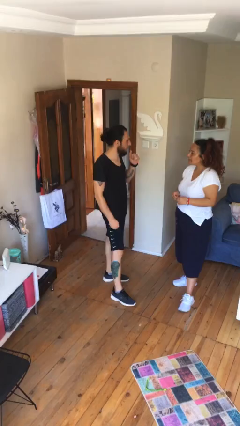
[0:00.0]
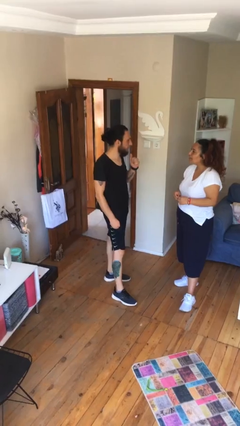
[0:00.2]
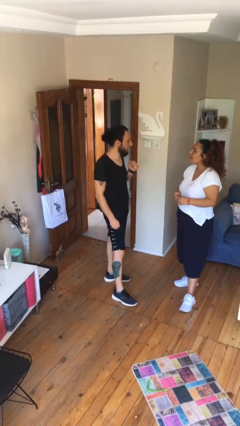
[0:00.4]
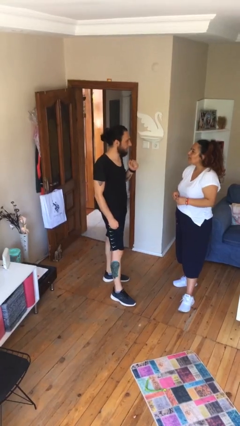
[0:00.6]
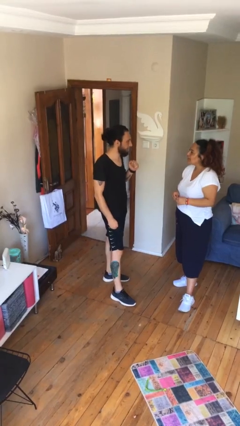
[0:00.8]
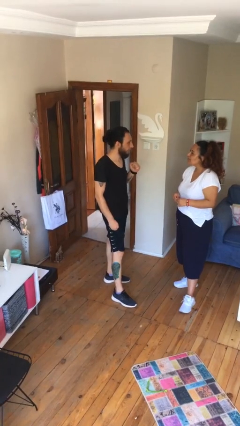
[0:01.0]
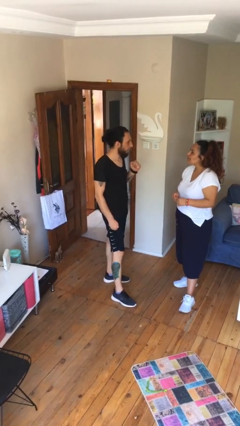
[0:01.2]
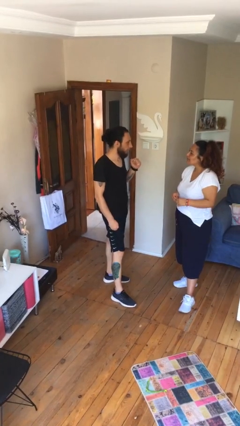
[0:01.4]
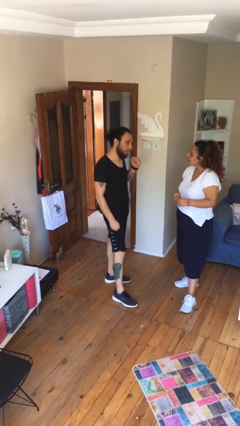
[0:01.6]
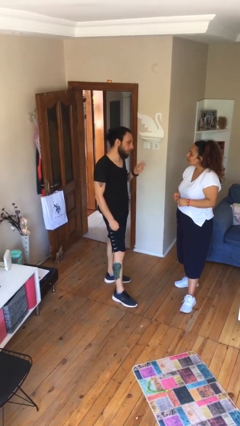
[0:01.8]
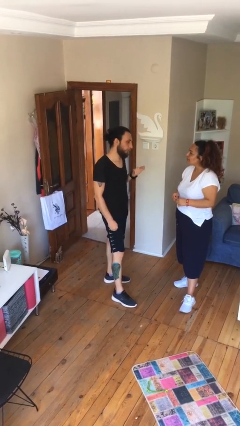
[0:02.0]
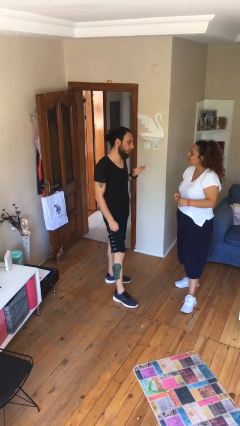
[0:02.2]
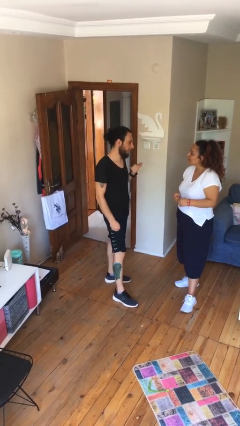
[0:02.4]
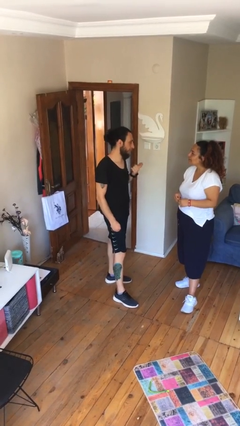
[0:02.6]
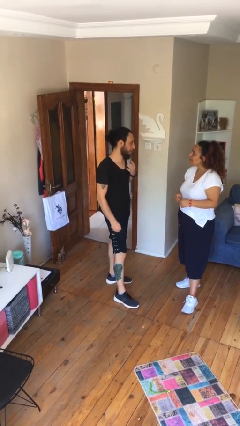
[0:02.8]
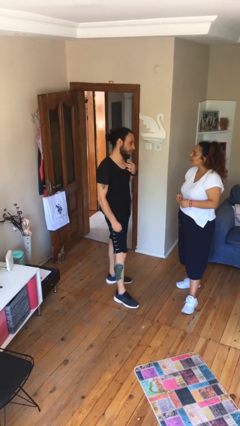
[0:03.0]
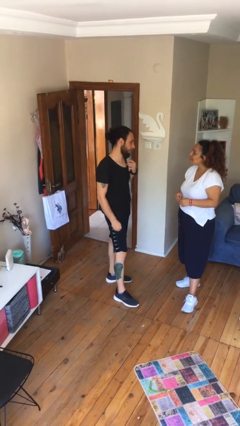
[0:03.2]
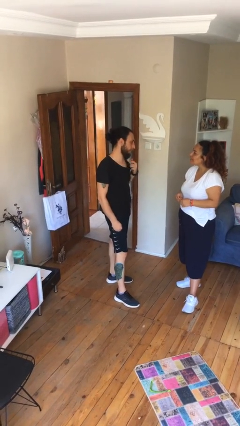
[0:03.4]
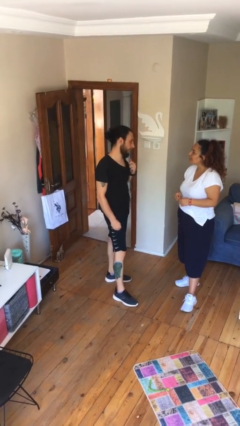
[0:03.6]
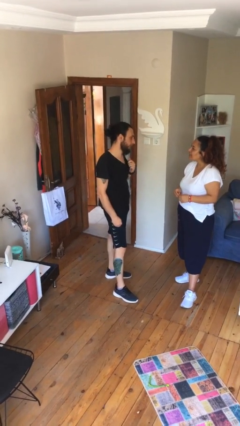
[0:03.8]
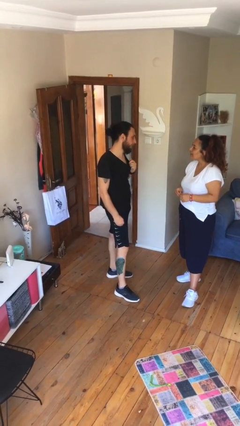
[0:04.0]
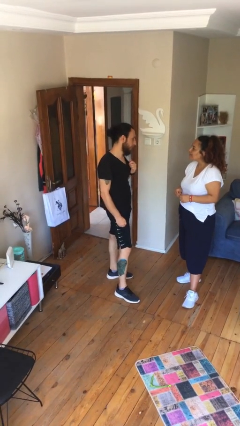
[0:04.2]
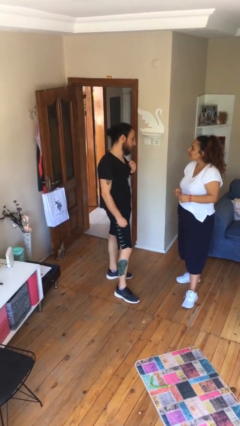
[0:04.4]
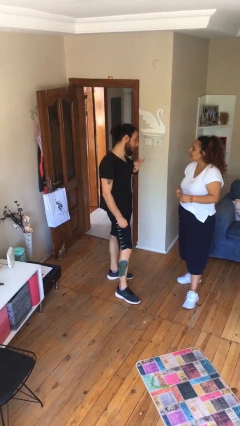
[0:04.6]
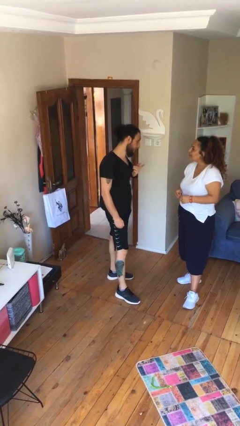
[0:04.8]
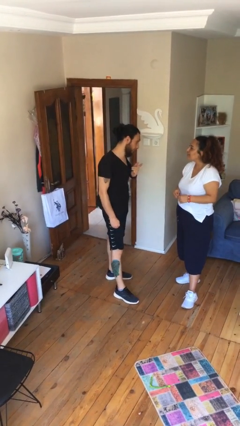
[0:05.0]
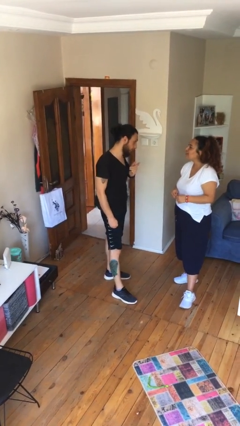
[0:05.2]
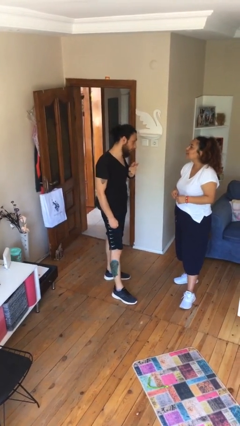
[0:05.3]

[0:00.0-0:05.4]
person talks to person

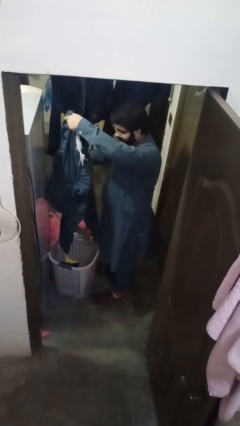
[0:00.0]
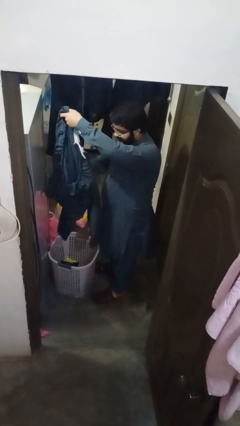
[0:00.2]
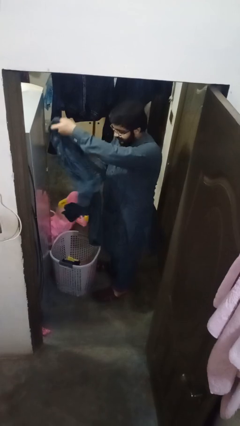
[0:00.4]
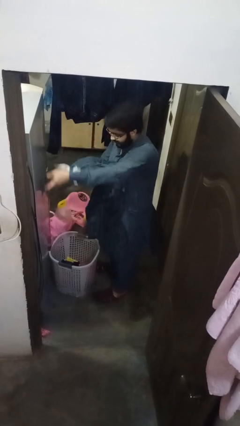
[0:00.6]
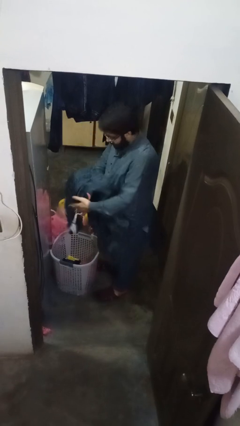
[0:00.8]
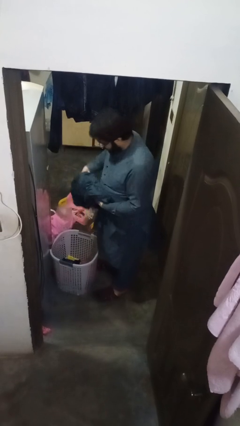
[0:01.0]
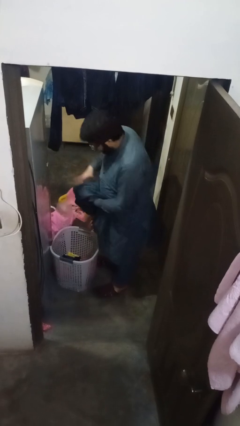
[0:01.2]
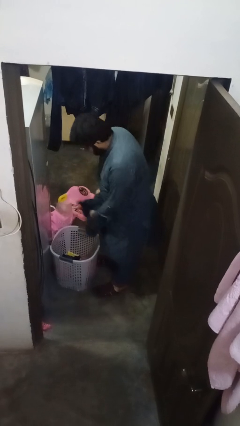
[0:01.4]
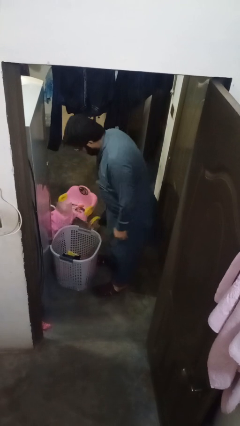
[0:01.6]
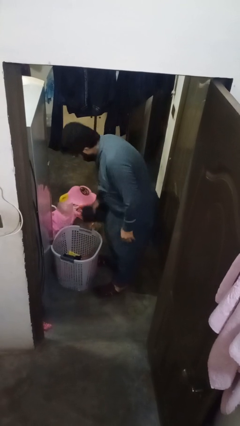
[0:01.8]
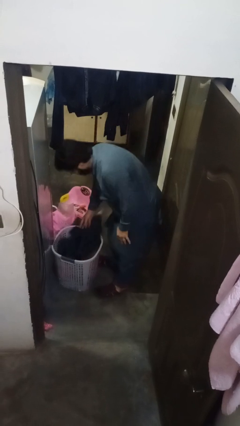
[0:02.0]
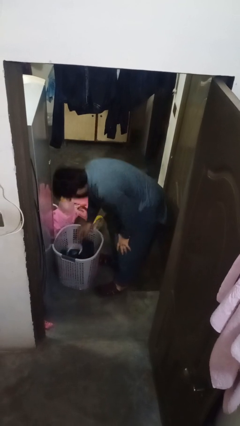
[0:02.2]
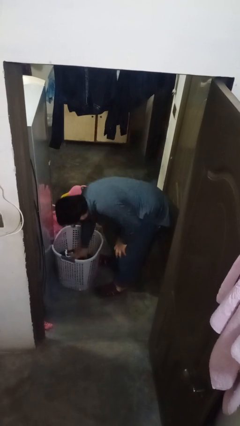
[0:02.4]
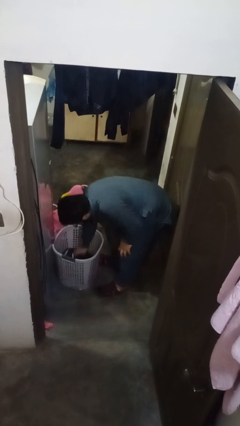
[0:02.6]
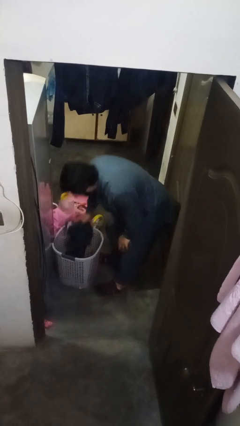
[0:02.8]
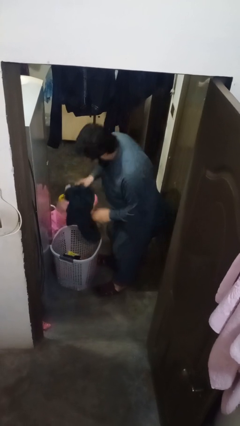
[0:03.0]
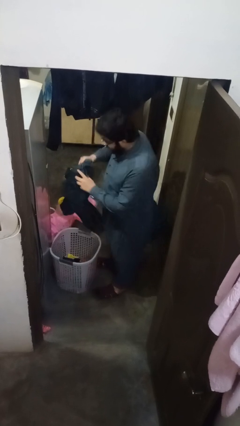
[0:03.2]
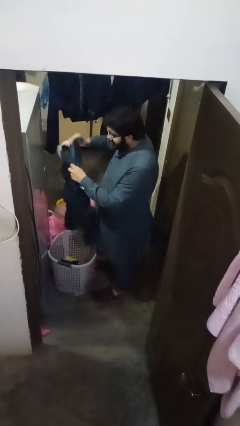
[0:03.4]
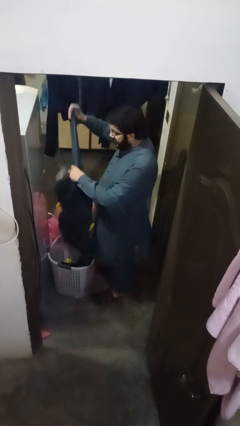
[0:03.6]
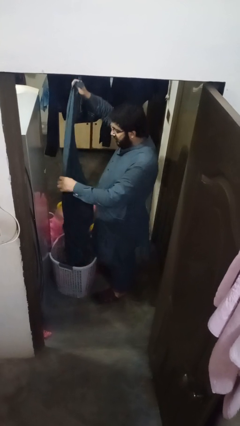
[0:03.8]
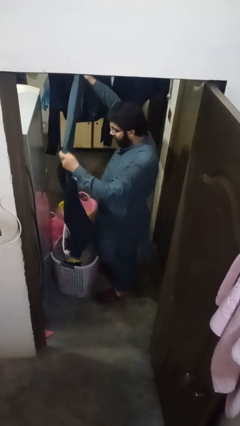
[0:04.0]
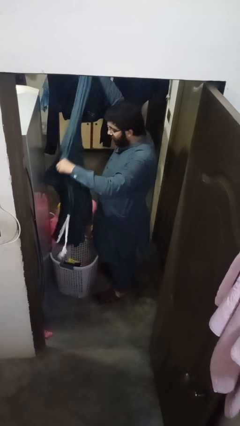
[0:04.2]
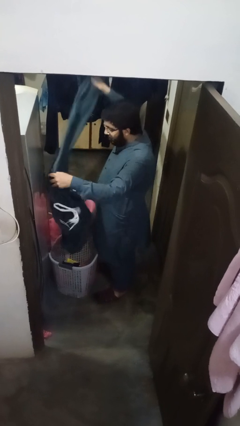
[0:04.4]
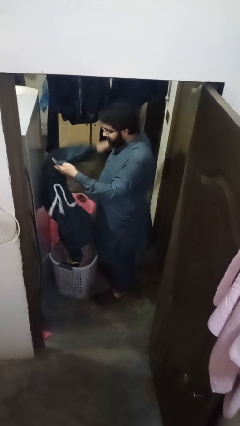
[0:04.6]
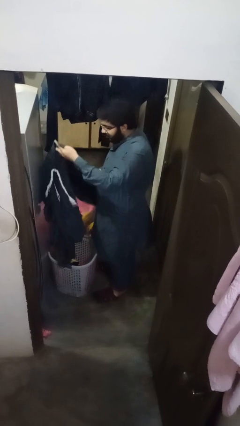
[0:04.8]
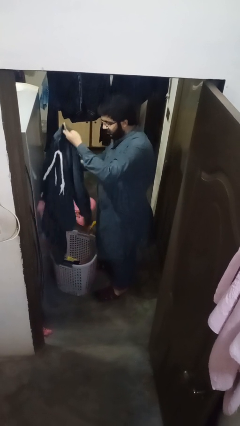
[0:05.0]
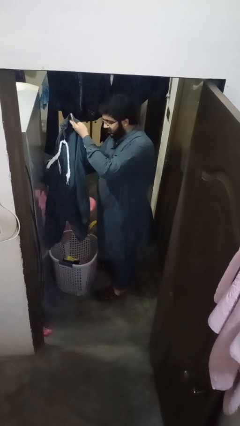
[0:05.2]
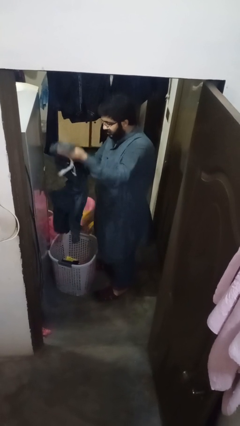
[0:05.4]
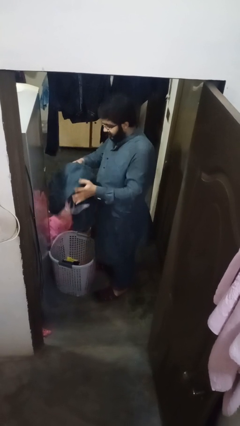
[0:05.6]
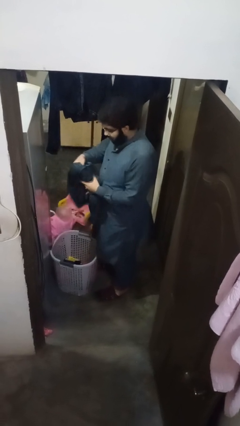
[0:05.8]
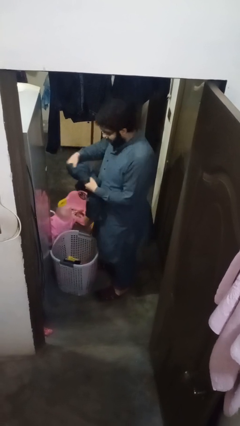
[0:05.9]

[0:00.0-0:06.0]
person folds pants

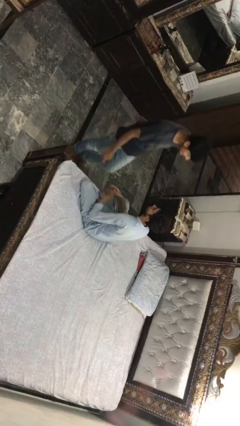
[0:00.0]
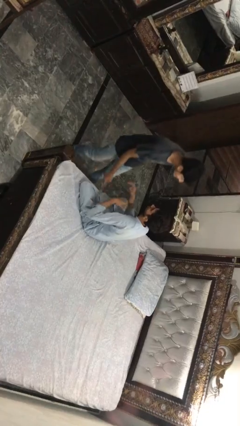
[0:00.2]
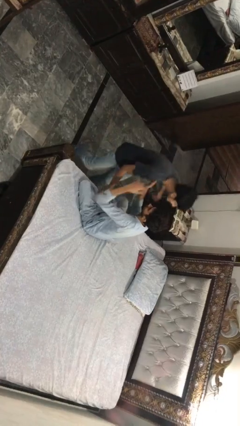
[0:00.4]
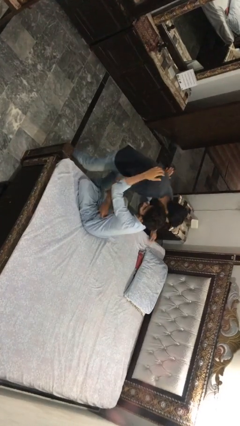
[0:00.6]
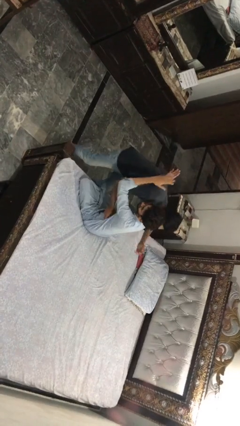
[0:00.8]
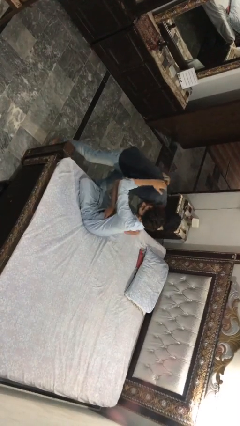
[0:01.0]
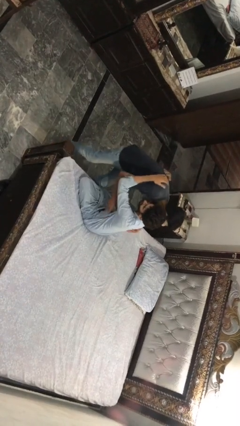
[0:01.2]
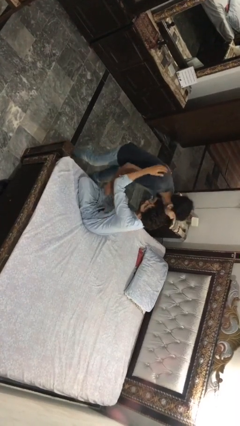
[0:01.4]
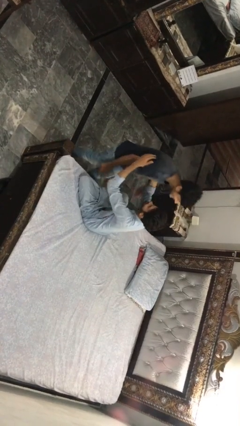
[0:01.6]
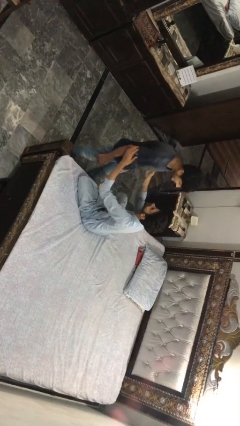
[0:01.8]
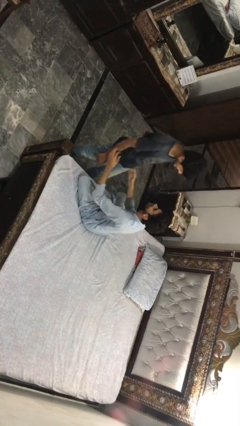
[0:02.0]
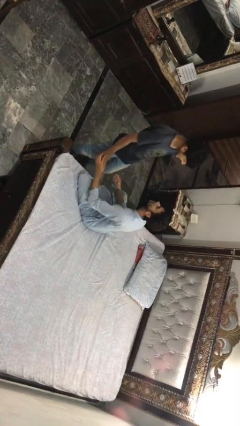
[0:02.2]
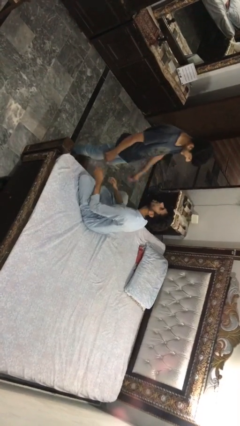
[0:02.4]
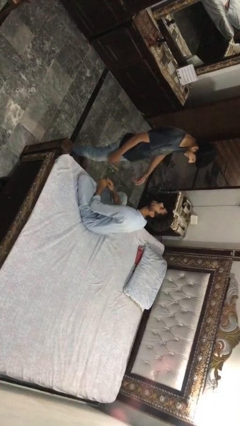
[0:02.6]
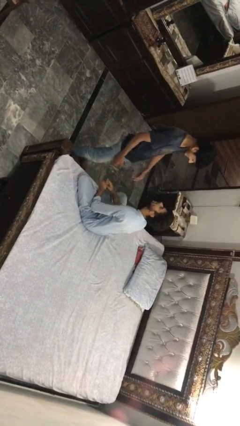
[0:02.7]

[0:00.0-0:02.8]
person embraces person

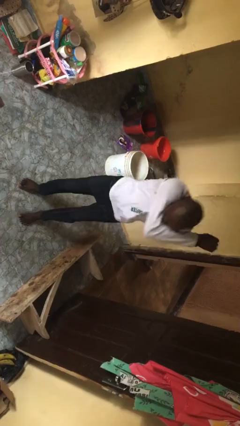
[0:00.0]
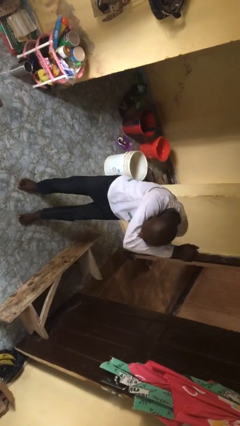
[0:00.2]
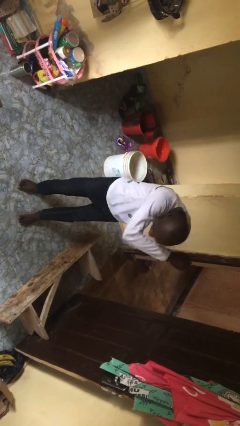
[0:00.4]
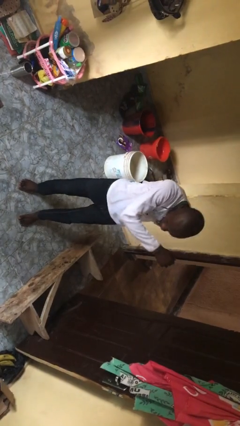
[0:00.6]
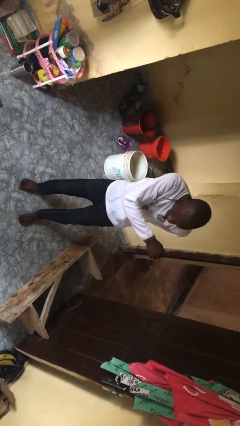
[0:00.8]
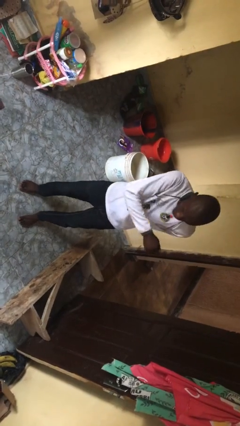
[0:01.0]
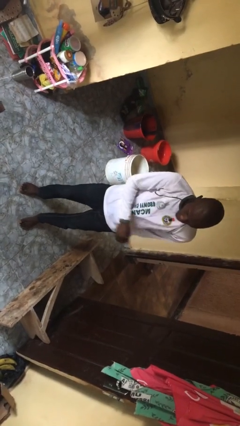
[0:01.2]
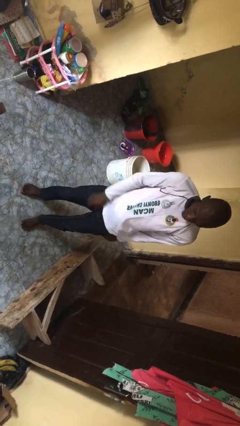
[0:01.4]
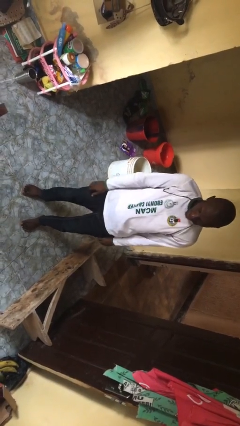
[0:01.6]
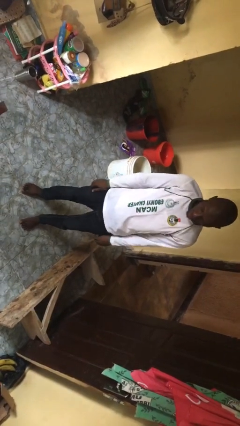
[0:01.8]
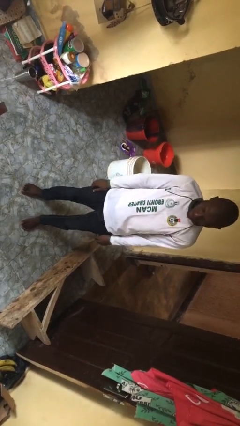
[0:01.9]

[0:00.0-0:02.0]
person sneezes into arm

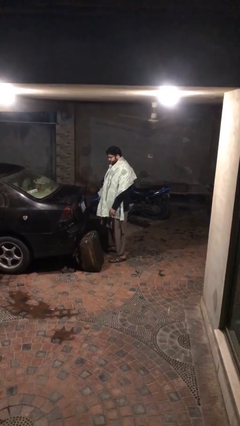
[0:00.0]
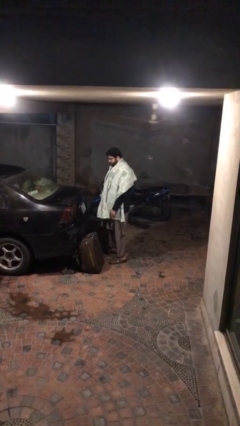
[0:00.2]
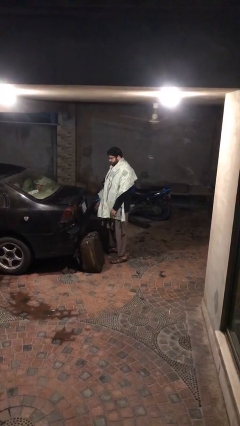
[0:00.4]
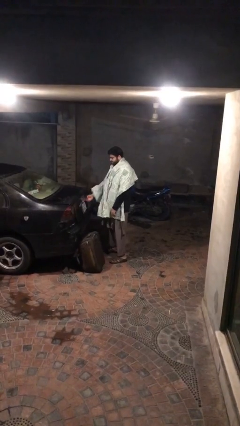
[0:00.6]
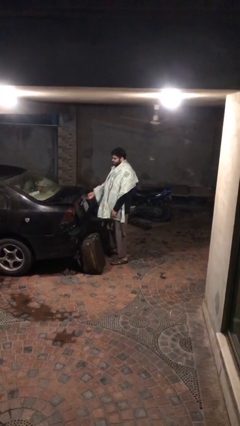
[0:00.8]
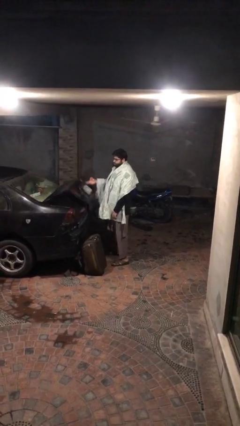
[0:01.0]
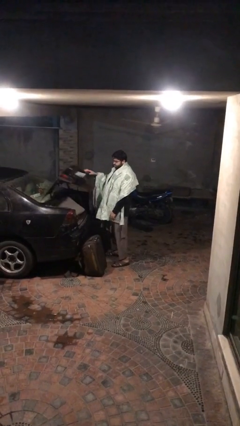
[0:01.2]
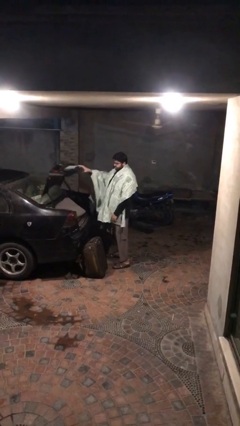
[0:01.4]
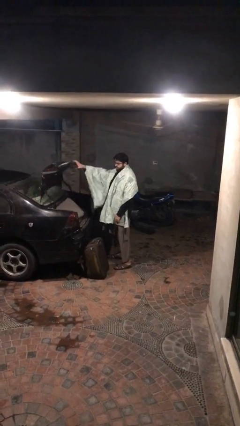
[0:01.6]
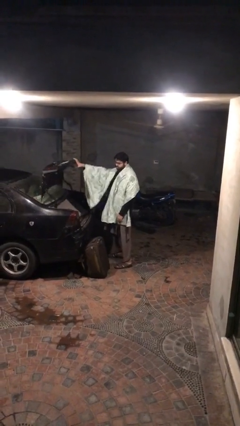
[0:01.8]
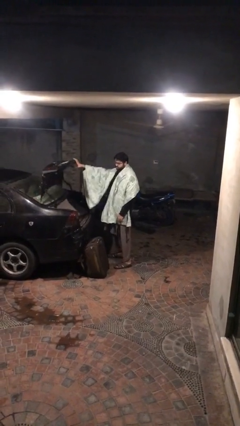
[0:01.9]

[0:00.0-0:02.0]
person opens car trunk
